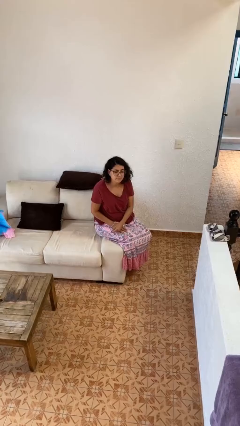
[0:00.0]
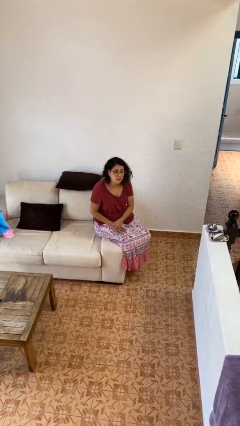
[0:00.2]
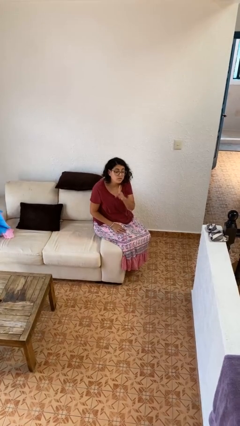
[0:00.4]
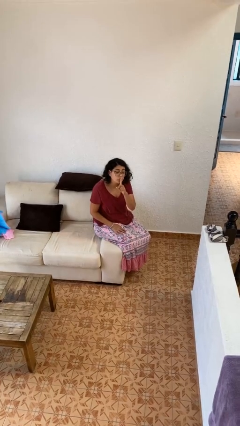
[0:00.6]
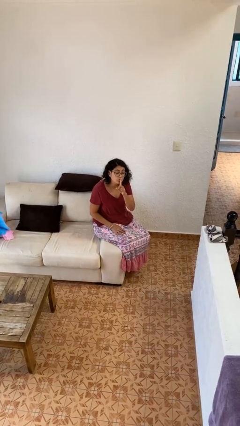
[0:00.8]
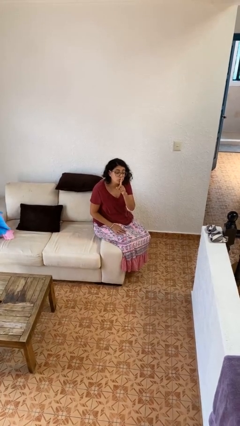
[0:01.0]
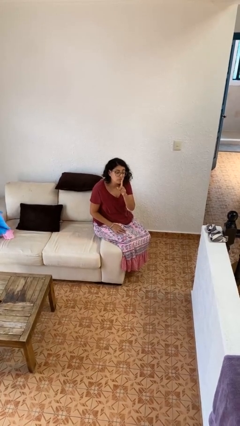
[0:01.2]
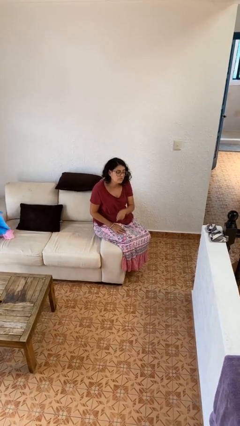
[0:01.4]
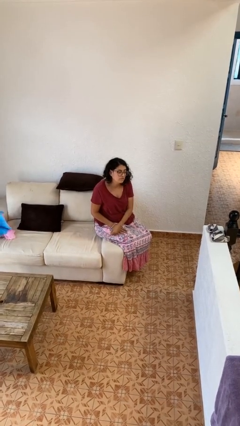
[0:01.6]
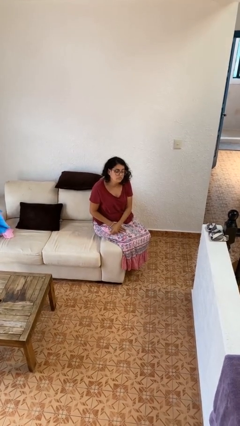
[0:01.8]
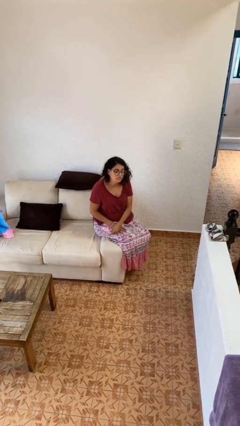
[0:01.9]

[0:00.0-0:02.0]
person gestures be quiet

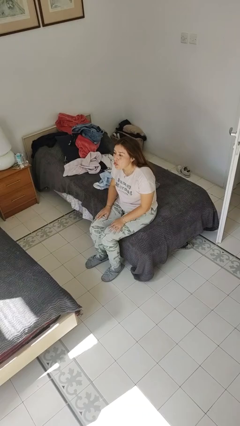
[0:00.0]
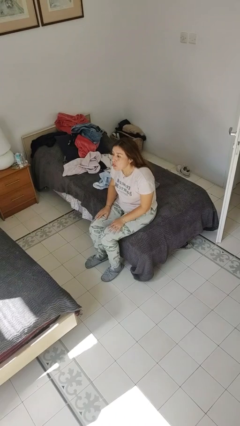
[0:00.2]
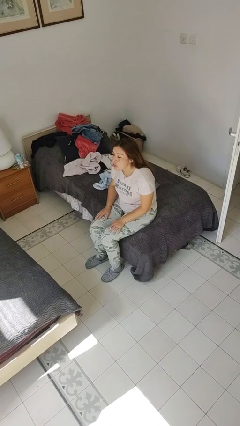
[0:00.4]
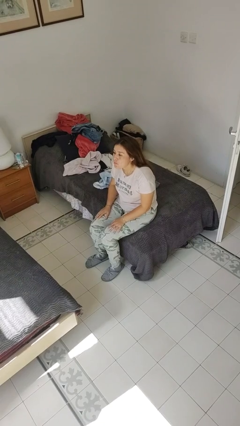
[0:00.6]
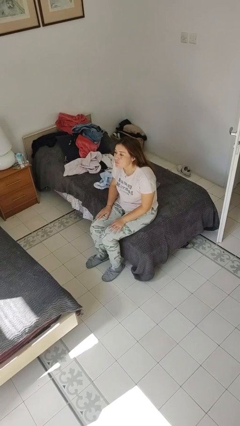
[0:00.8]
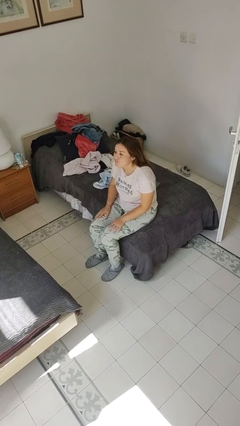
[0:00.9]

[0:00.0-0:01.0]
person sticks out tongue

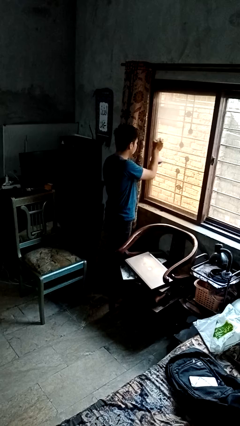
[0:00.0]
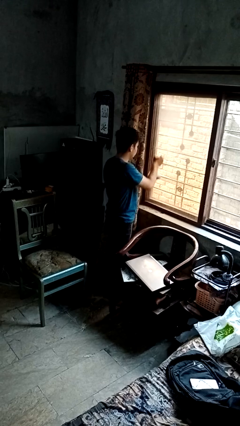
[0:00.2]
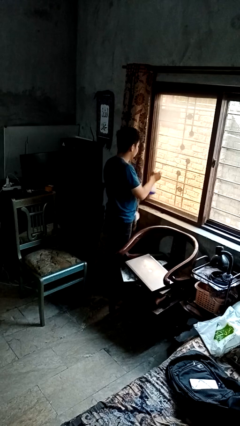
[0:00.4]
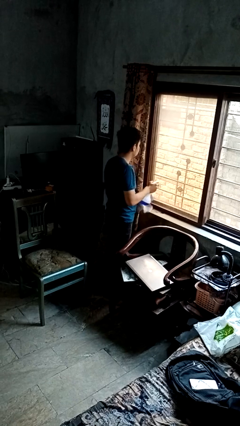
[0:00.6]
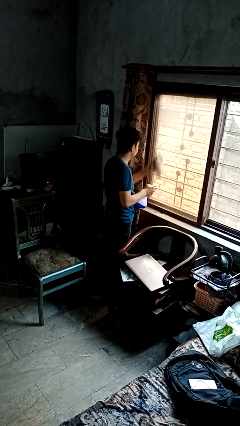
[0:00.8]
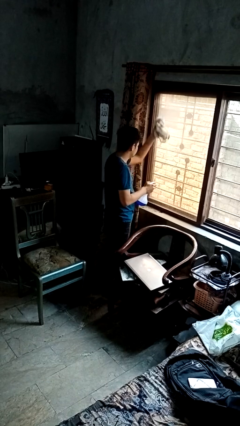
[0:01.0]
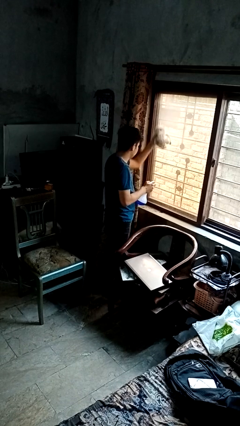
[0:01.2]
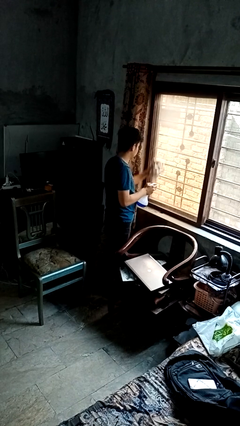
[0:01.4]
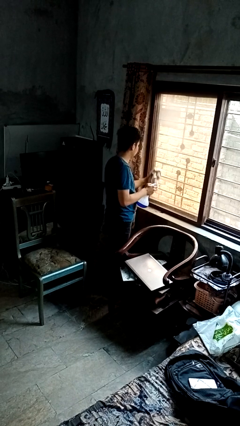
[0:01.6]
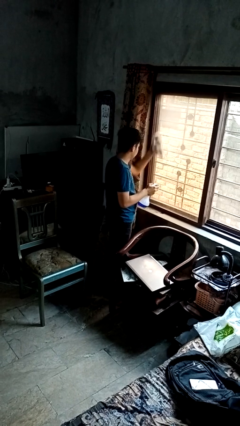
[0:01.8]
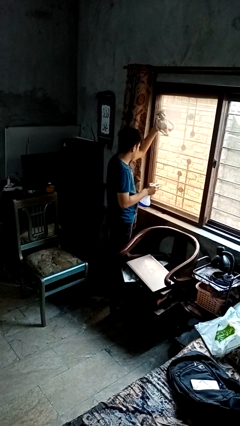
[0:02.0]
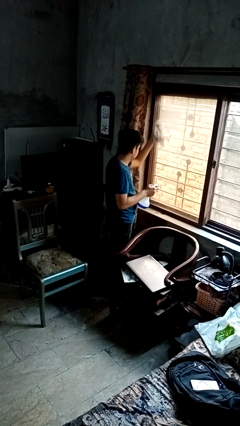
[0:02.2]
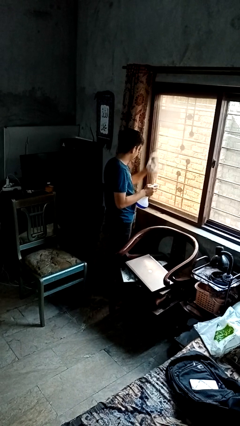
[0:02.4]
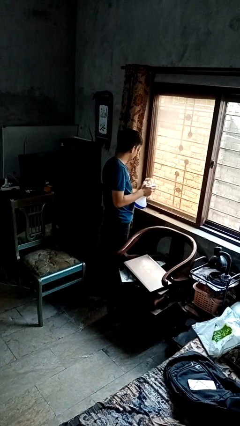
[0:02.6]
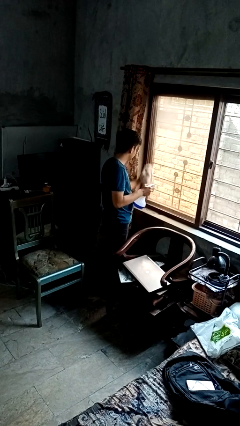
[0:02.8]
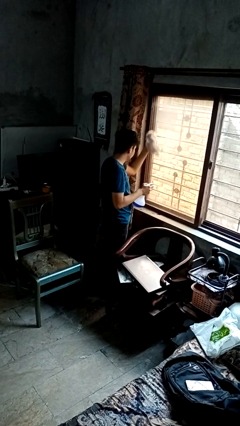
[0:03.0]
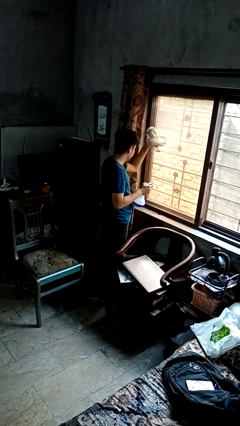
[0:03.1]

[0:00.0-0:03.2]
person washes window

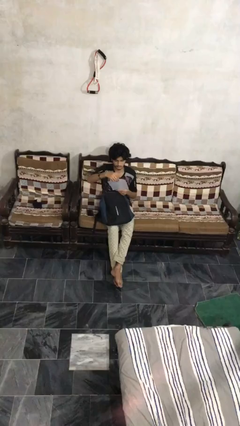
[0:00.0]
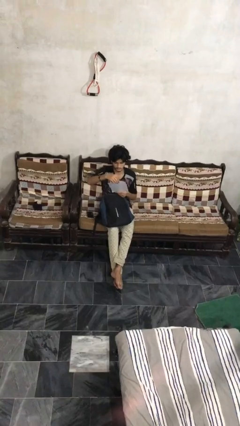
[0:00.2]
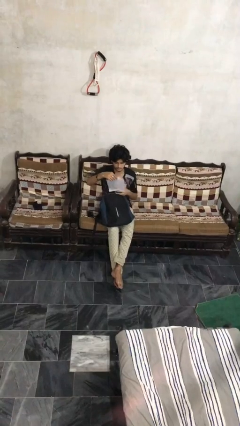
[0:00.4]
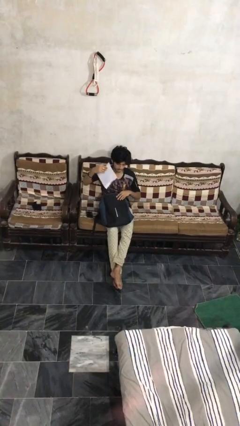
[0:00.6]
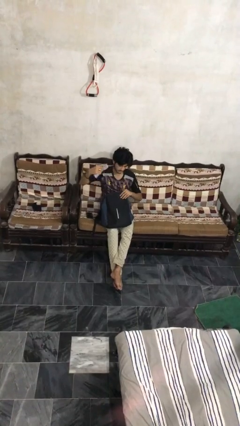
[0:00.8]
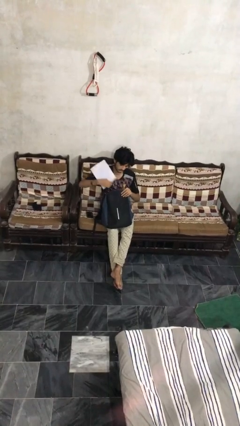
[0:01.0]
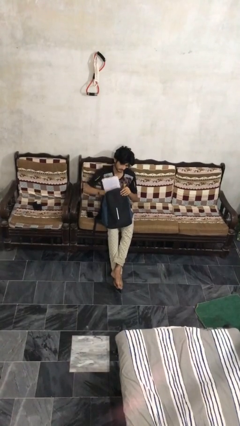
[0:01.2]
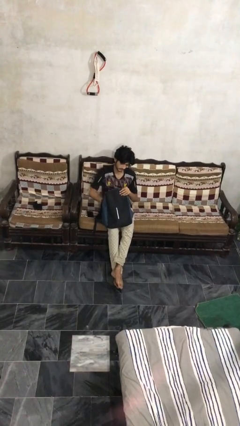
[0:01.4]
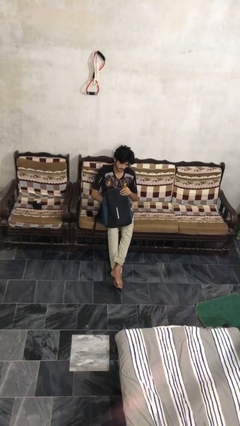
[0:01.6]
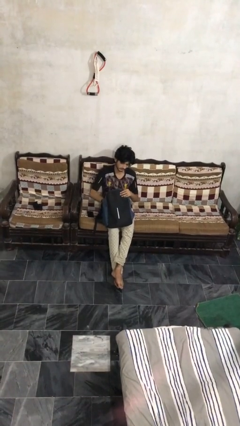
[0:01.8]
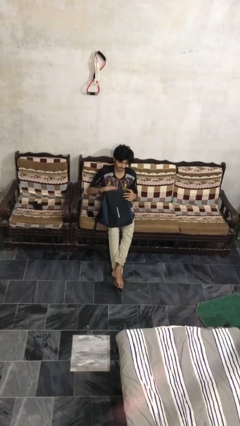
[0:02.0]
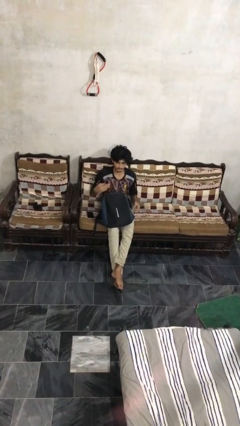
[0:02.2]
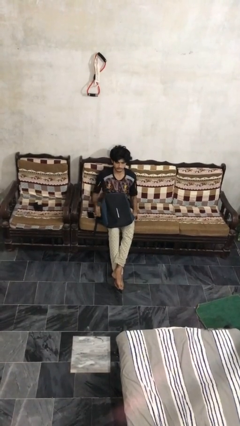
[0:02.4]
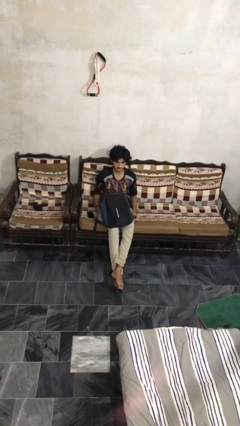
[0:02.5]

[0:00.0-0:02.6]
person puts object into backpack

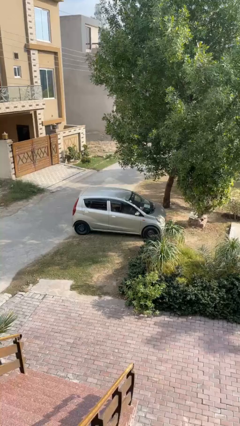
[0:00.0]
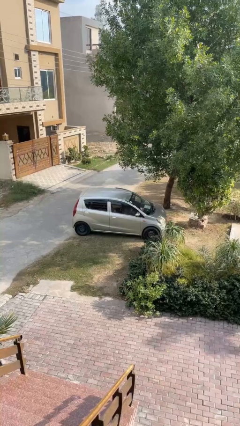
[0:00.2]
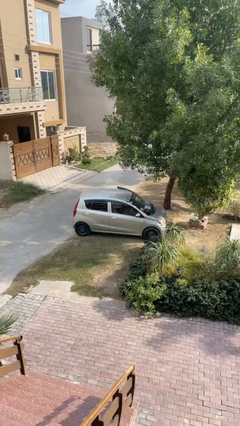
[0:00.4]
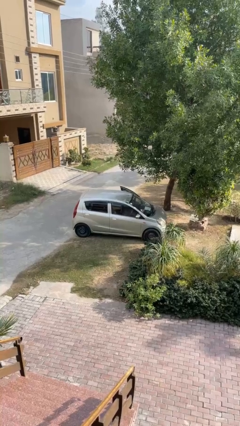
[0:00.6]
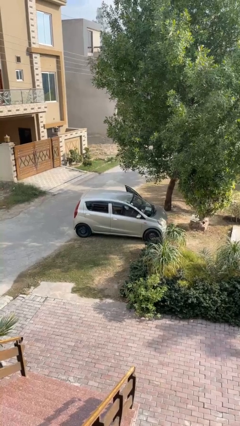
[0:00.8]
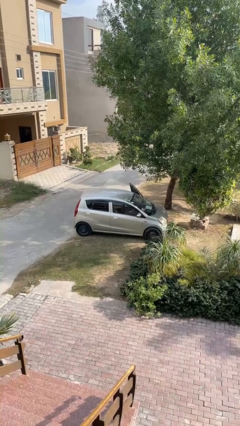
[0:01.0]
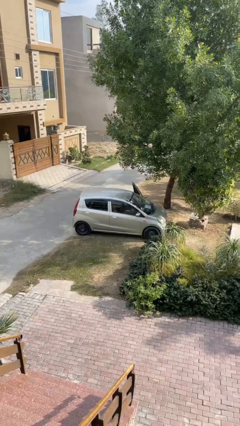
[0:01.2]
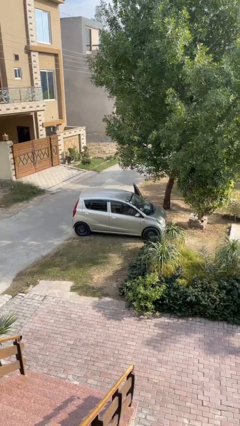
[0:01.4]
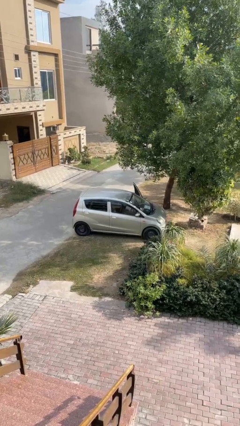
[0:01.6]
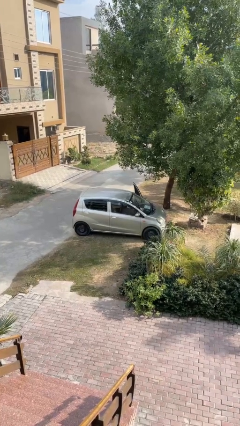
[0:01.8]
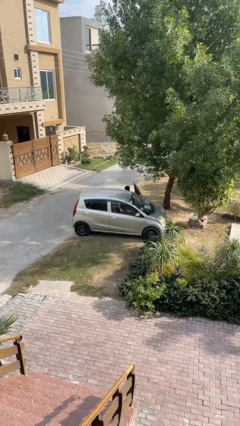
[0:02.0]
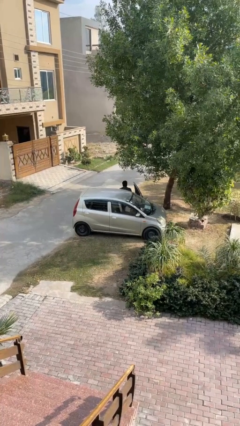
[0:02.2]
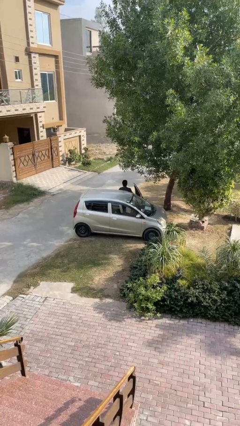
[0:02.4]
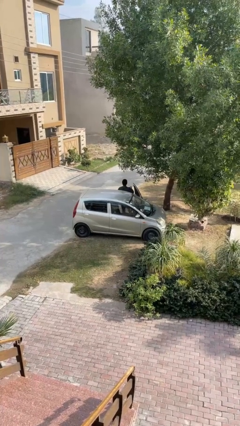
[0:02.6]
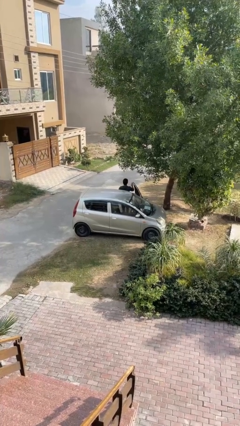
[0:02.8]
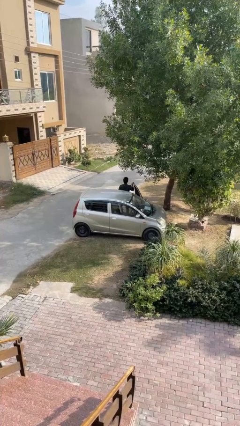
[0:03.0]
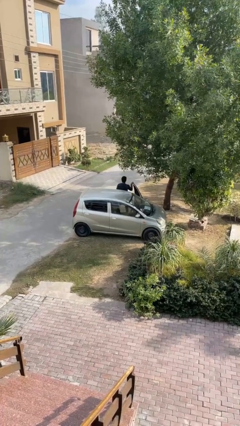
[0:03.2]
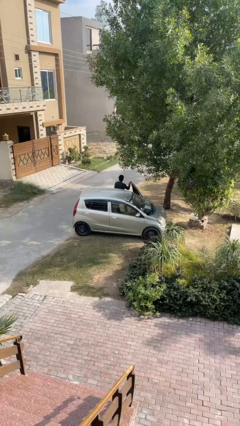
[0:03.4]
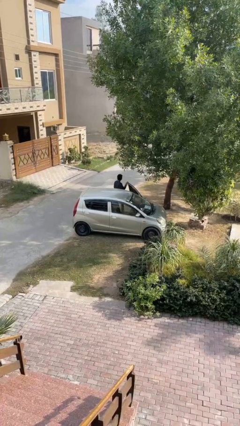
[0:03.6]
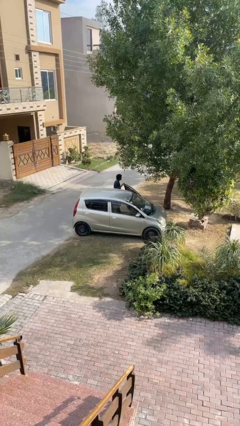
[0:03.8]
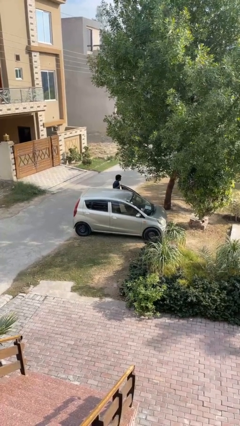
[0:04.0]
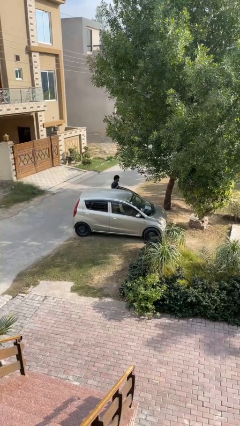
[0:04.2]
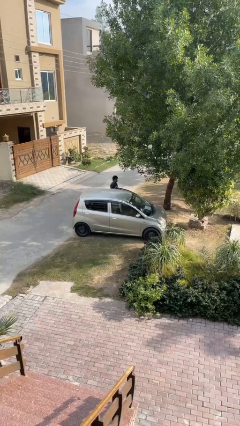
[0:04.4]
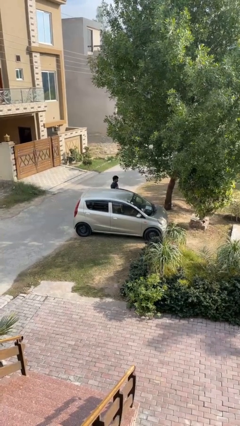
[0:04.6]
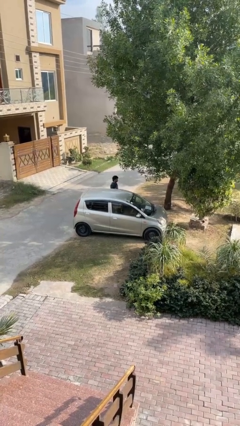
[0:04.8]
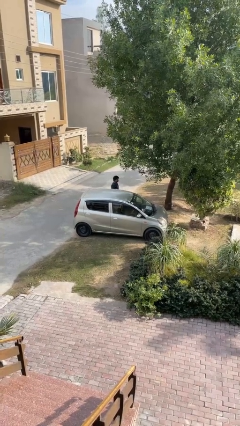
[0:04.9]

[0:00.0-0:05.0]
car drops off person

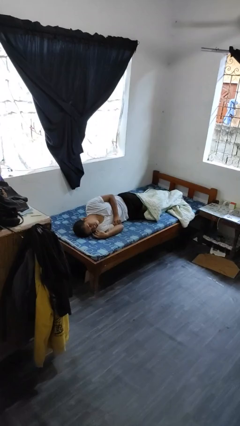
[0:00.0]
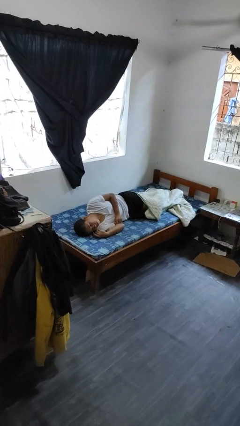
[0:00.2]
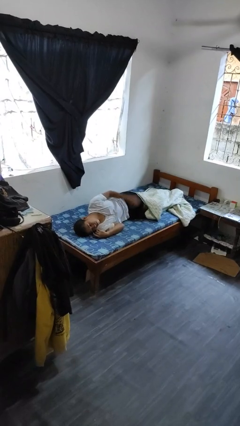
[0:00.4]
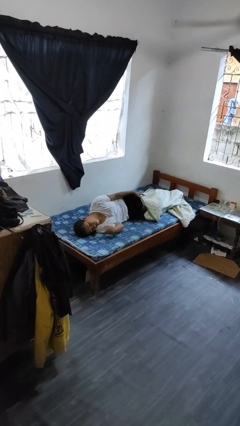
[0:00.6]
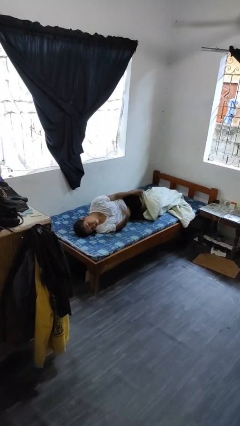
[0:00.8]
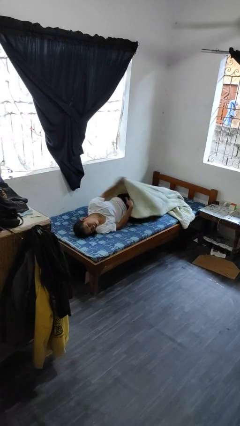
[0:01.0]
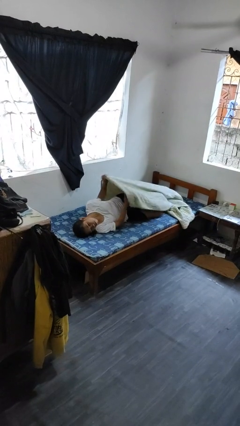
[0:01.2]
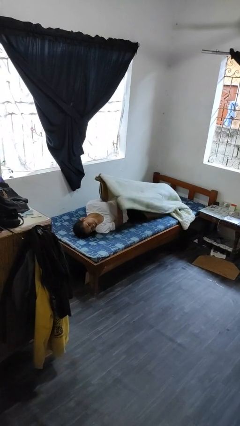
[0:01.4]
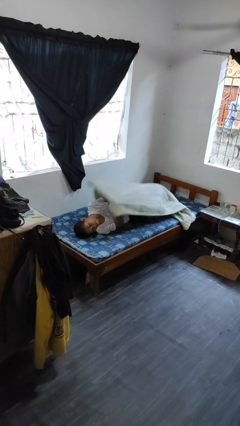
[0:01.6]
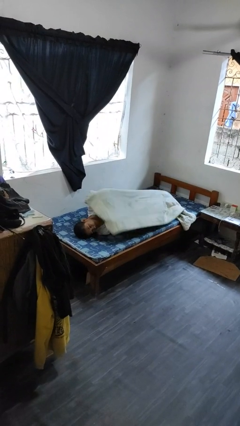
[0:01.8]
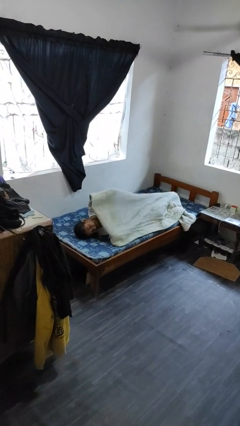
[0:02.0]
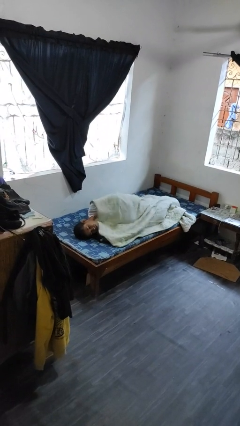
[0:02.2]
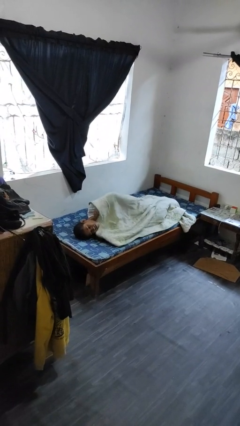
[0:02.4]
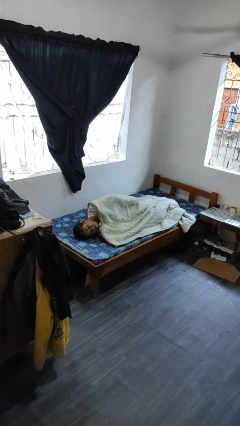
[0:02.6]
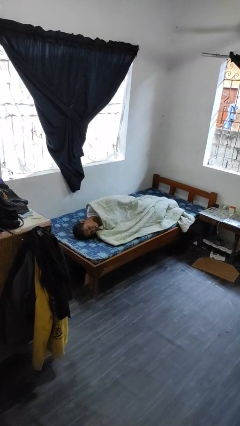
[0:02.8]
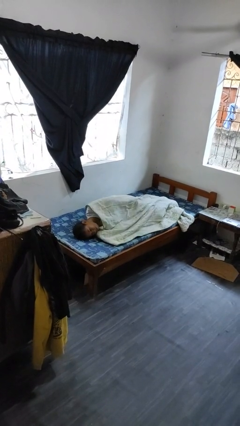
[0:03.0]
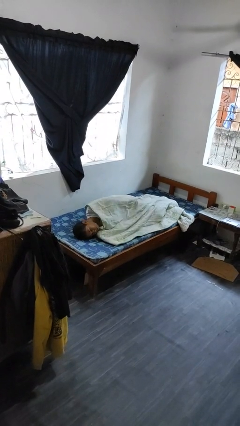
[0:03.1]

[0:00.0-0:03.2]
person covers with bedsheets

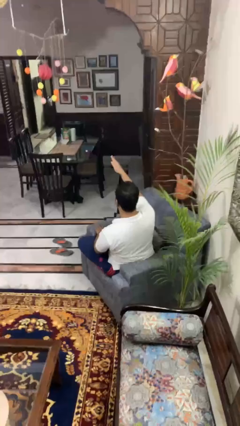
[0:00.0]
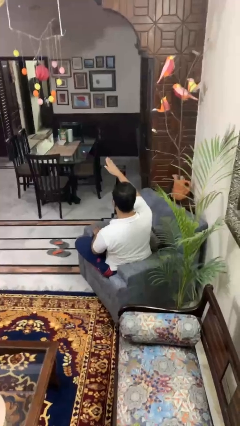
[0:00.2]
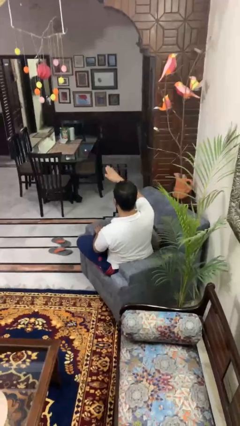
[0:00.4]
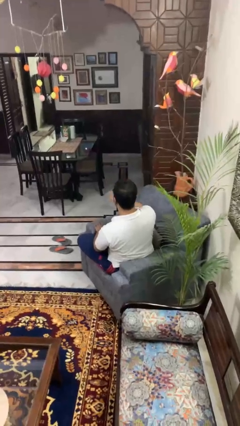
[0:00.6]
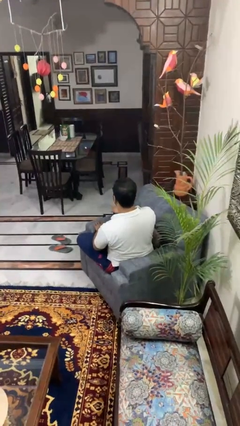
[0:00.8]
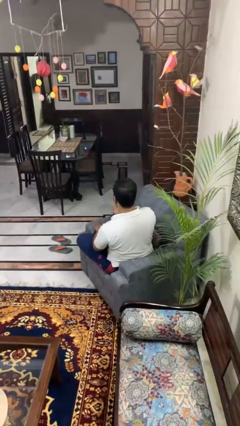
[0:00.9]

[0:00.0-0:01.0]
person gestures swipe down
